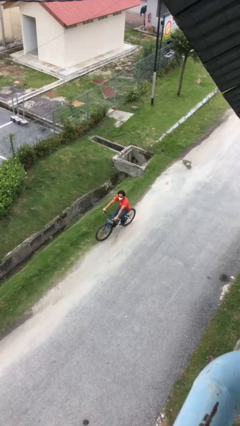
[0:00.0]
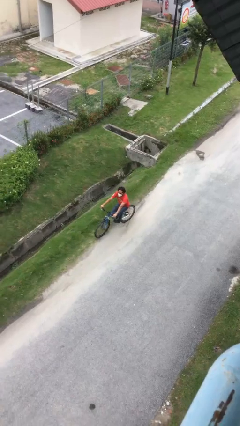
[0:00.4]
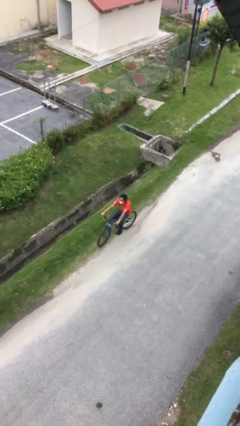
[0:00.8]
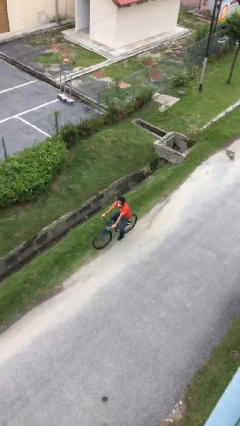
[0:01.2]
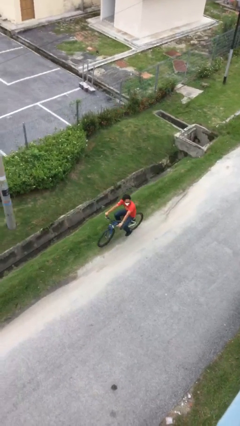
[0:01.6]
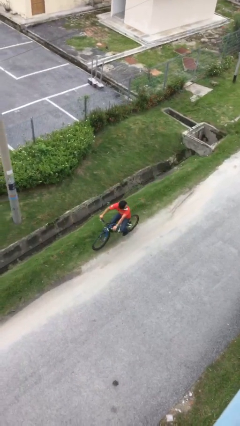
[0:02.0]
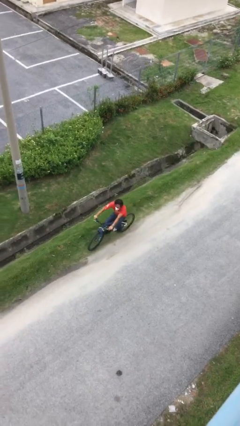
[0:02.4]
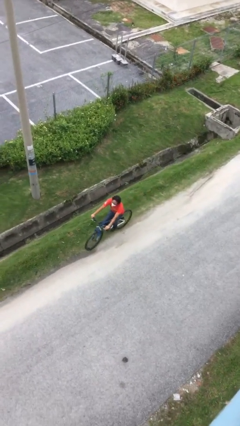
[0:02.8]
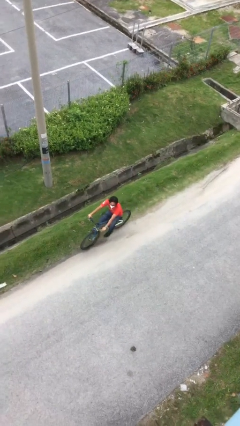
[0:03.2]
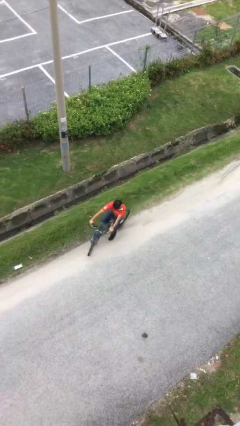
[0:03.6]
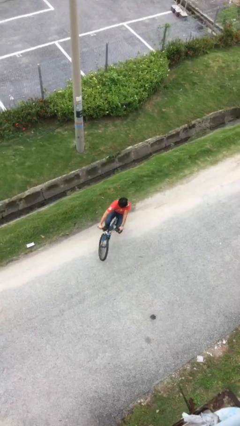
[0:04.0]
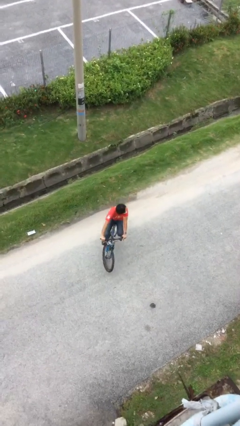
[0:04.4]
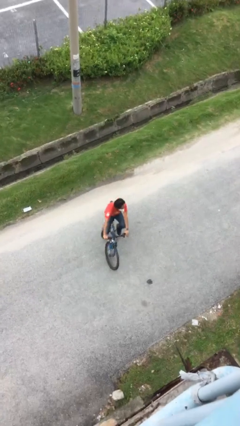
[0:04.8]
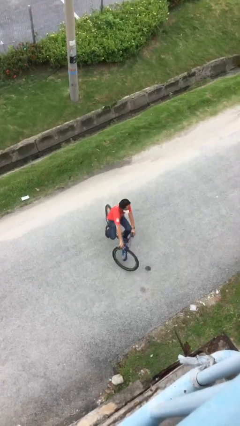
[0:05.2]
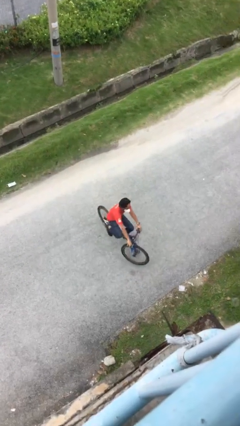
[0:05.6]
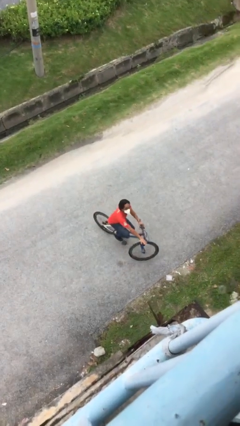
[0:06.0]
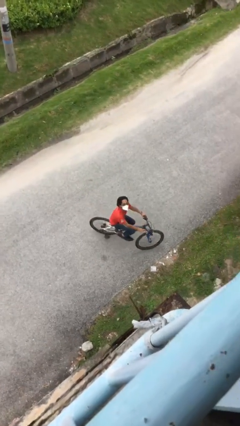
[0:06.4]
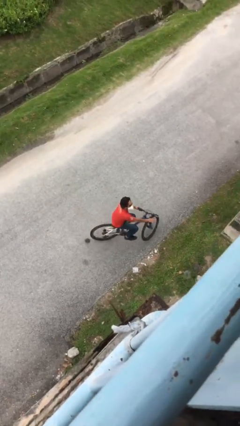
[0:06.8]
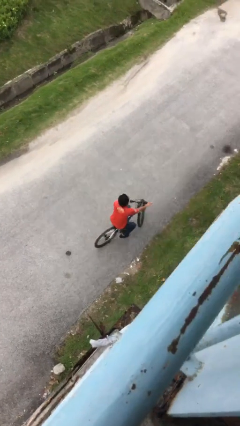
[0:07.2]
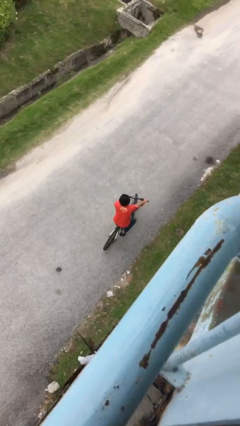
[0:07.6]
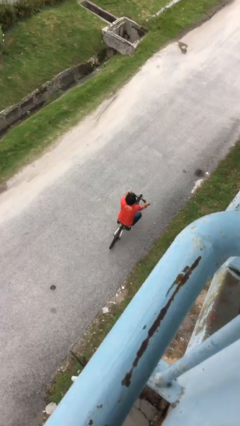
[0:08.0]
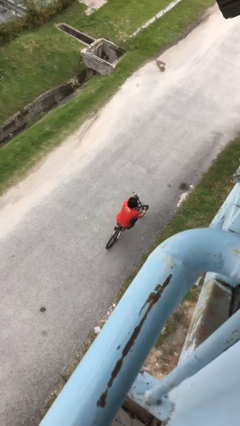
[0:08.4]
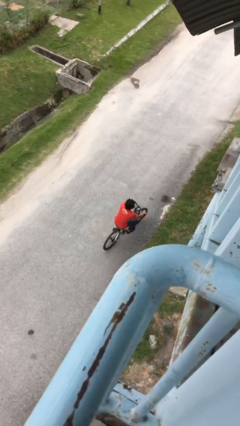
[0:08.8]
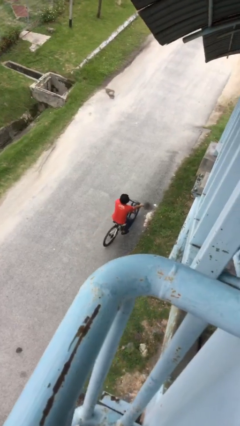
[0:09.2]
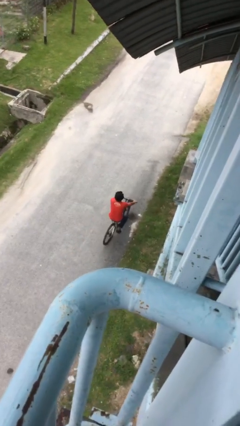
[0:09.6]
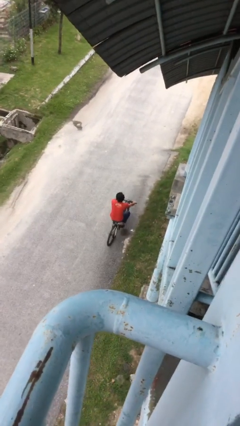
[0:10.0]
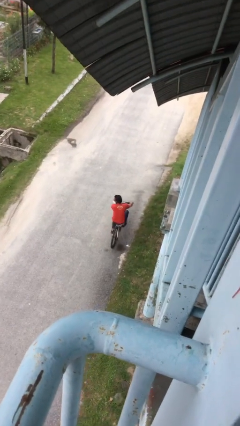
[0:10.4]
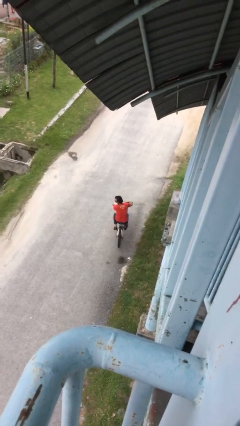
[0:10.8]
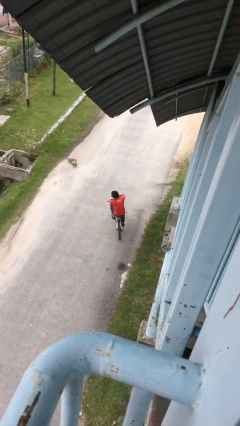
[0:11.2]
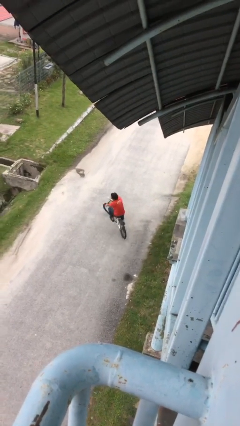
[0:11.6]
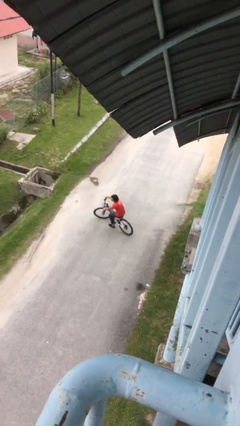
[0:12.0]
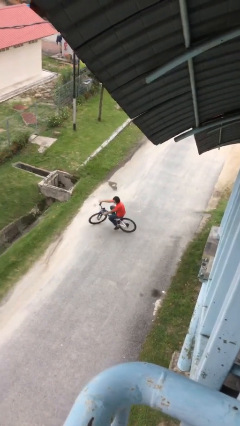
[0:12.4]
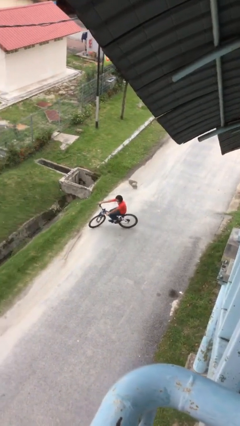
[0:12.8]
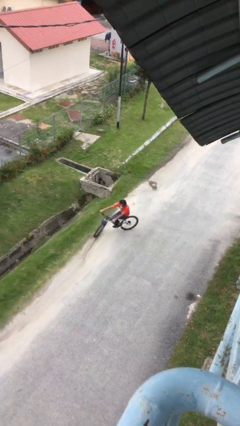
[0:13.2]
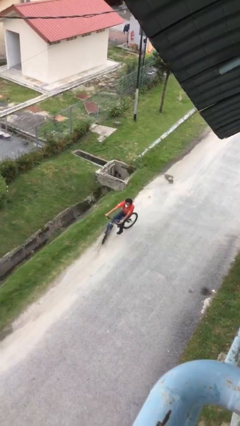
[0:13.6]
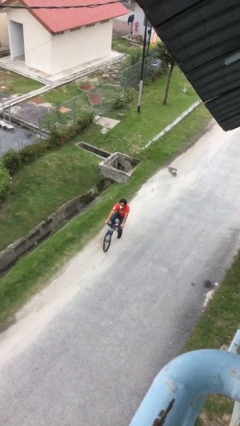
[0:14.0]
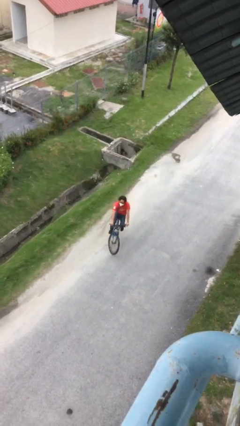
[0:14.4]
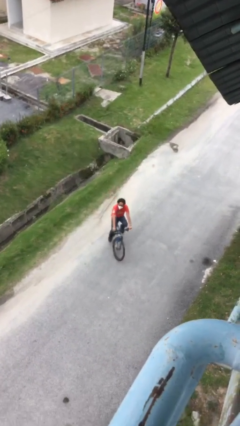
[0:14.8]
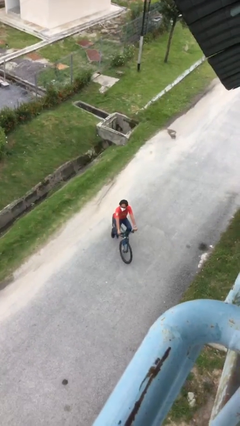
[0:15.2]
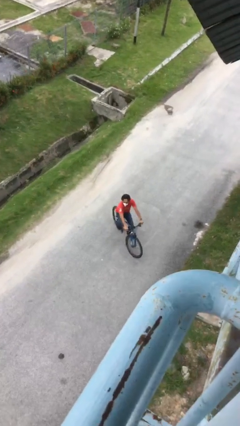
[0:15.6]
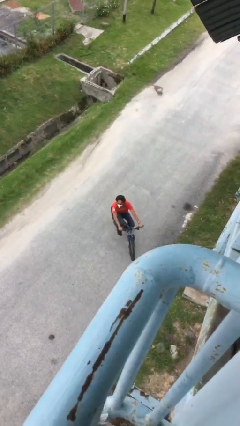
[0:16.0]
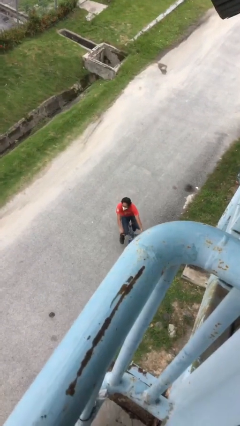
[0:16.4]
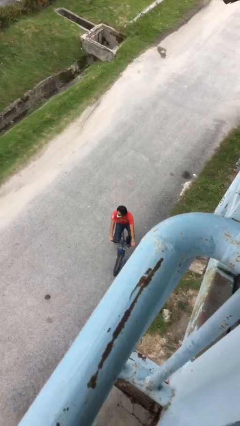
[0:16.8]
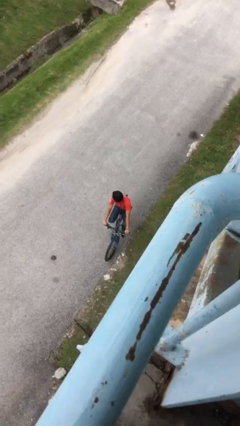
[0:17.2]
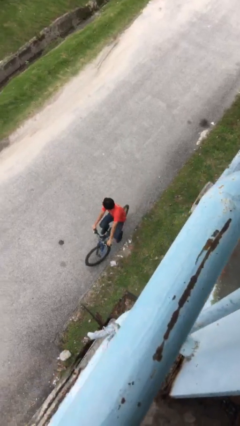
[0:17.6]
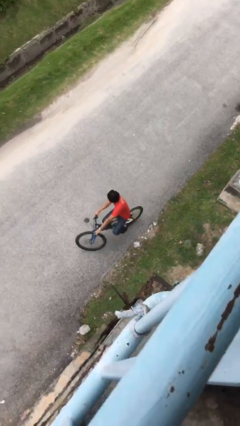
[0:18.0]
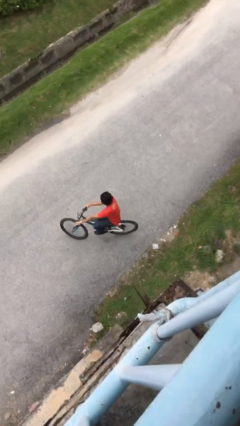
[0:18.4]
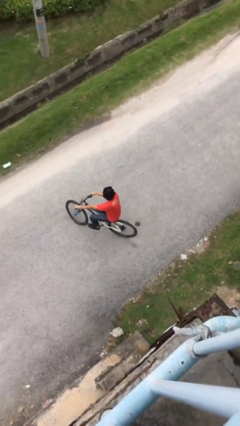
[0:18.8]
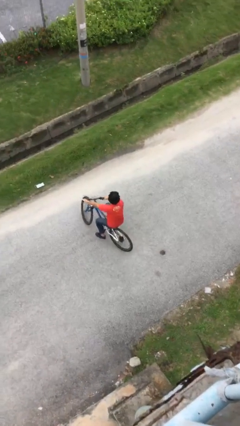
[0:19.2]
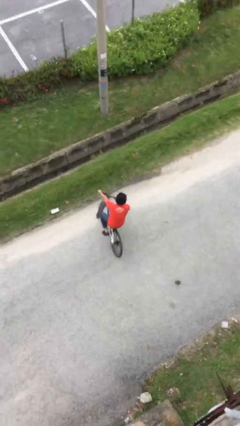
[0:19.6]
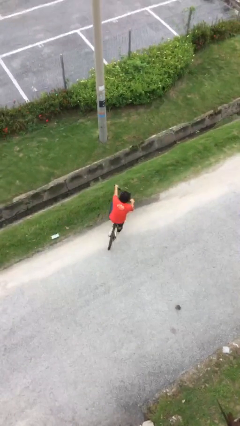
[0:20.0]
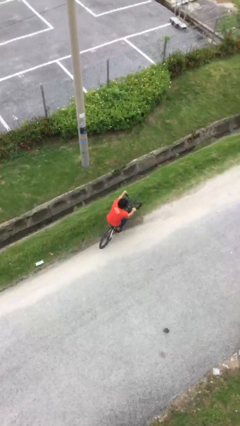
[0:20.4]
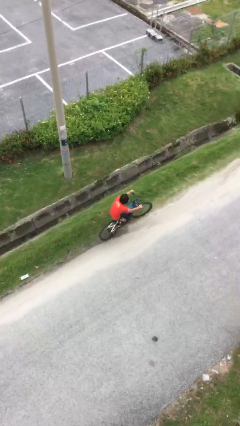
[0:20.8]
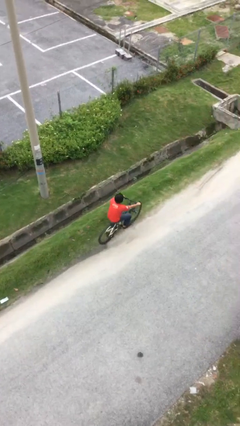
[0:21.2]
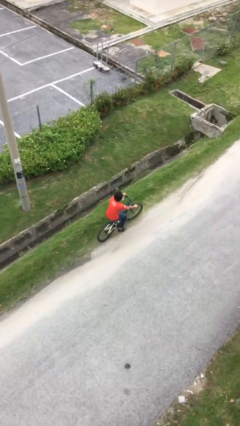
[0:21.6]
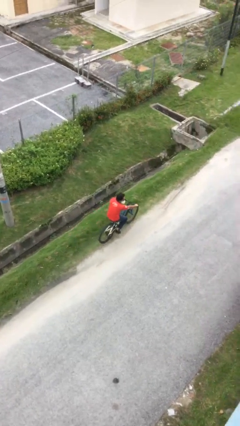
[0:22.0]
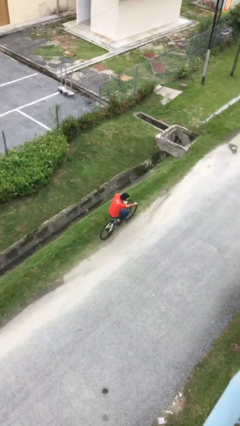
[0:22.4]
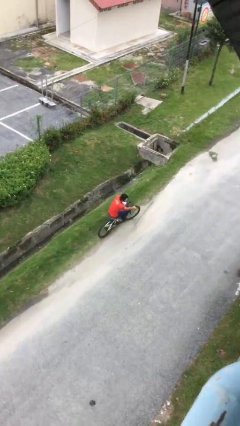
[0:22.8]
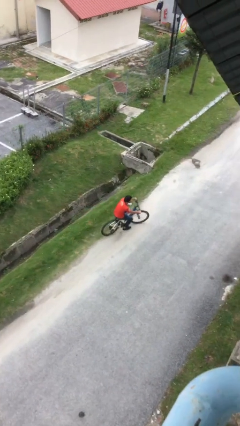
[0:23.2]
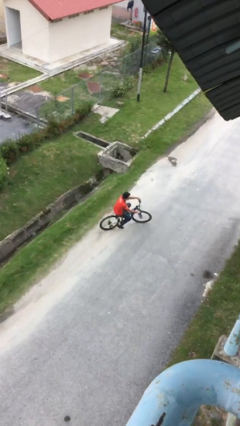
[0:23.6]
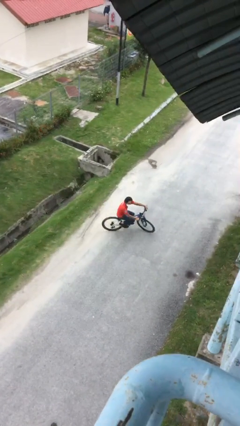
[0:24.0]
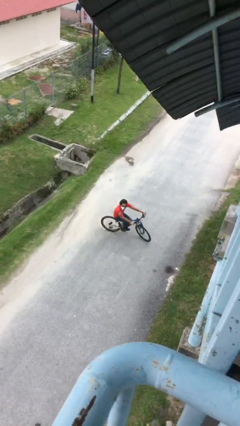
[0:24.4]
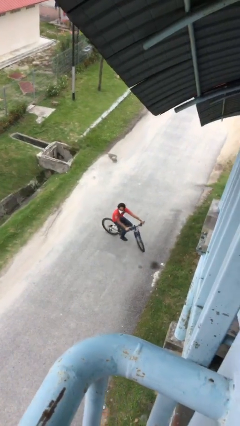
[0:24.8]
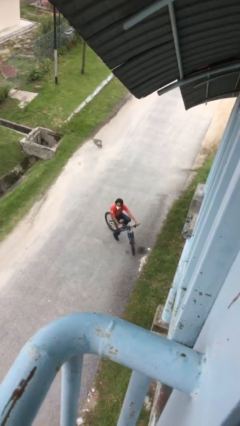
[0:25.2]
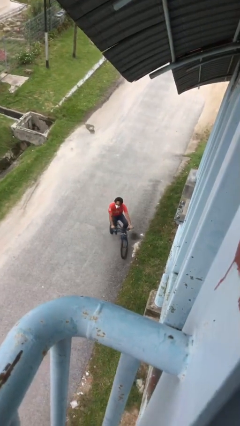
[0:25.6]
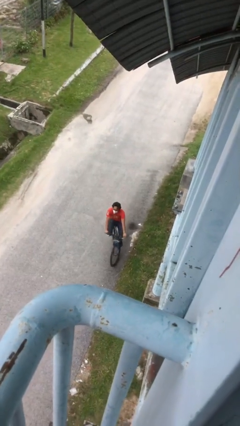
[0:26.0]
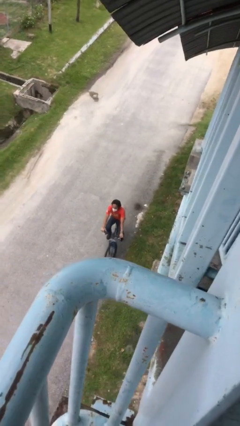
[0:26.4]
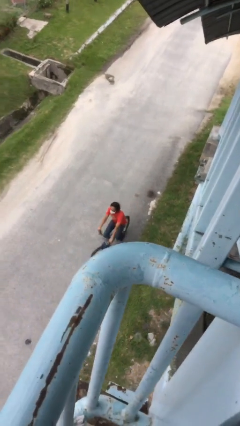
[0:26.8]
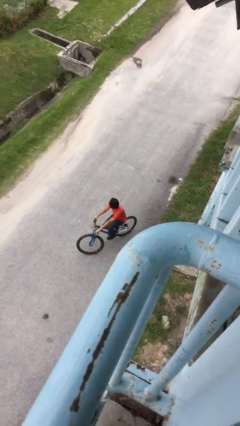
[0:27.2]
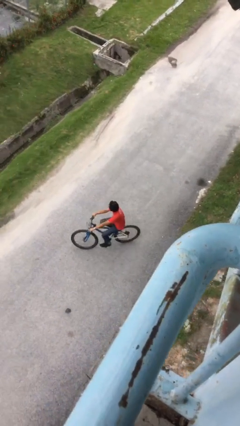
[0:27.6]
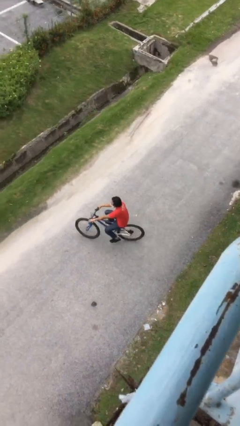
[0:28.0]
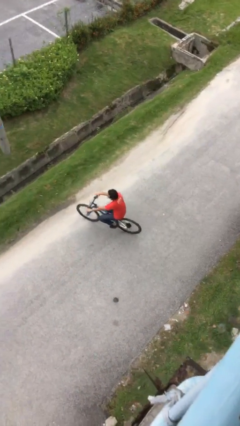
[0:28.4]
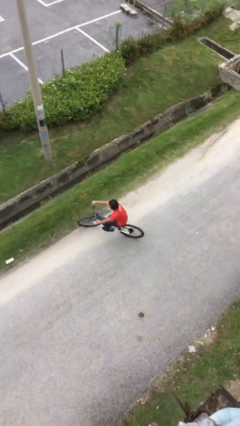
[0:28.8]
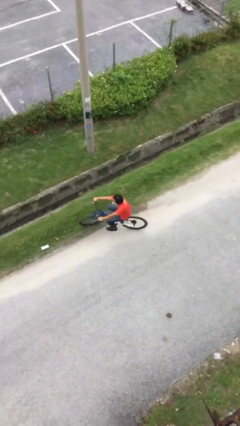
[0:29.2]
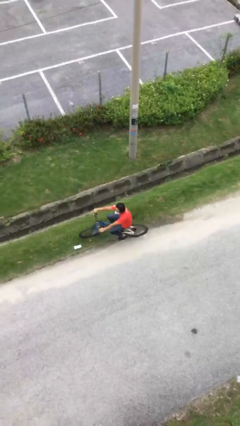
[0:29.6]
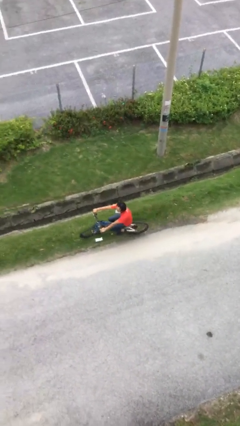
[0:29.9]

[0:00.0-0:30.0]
person rides bicycle

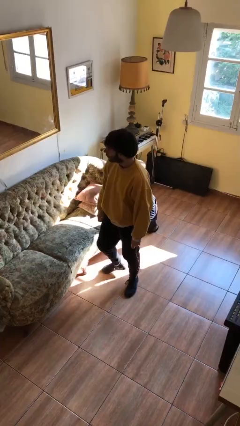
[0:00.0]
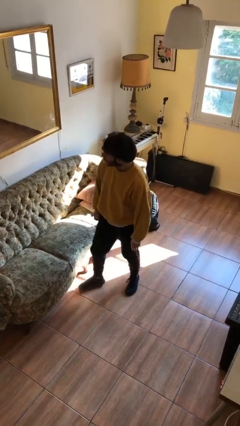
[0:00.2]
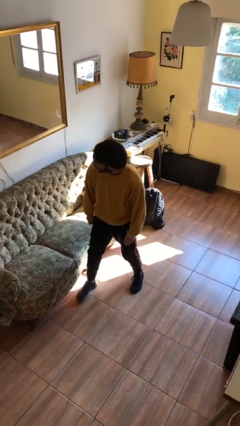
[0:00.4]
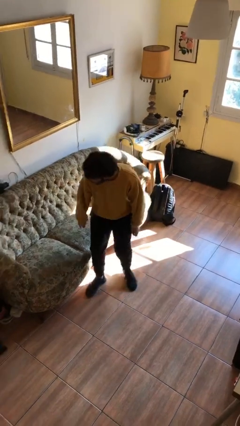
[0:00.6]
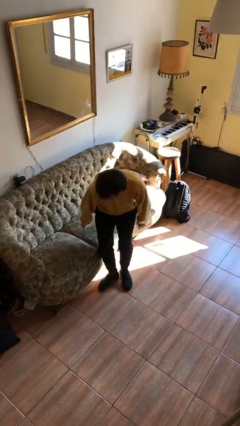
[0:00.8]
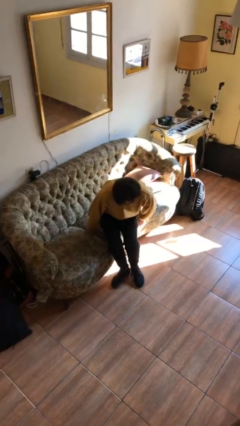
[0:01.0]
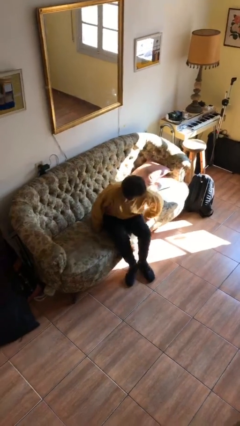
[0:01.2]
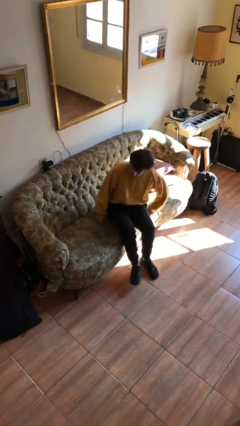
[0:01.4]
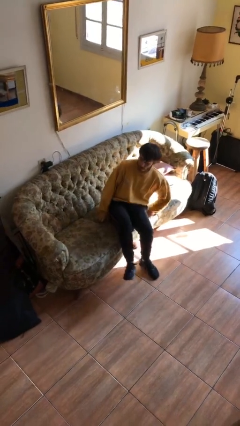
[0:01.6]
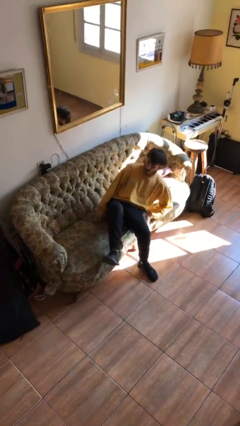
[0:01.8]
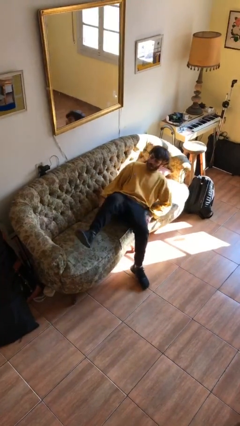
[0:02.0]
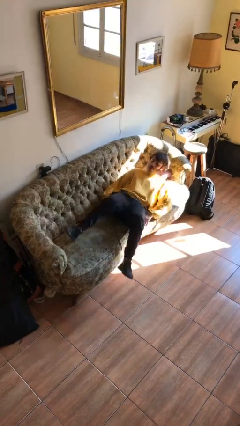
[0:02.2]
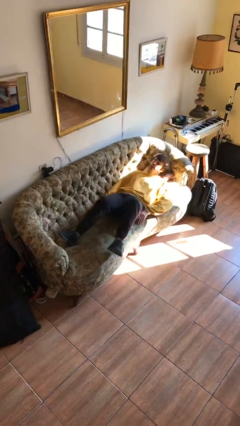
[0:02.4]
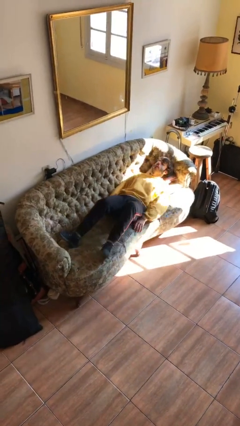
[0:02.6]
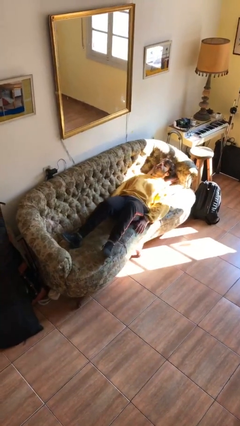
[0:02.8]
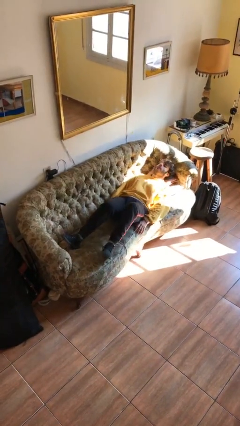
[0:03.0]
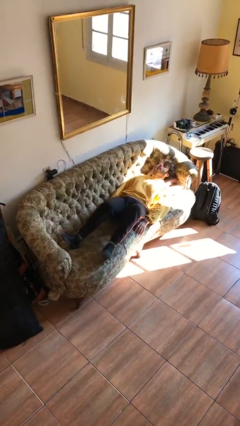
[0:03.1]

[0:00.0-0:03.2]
person lies down on couch
